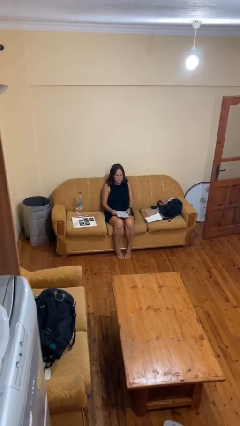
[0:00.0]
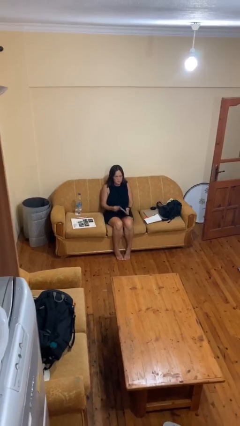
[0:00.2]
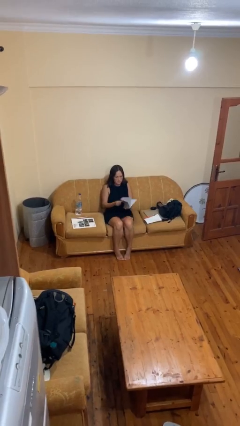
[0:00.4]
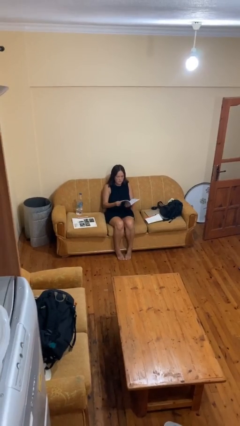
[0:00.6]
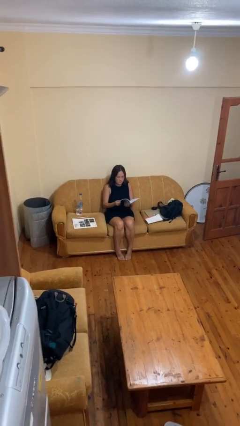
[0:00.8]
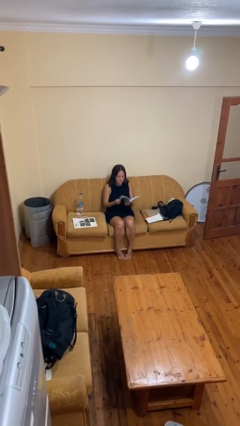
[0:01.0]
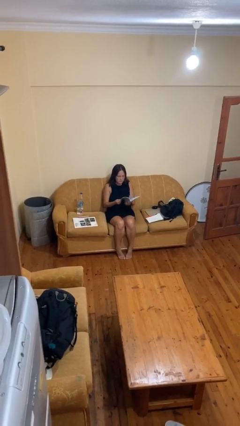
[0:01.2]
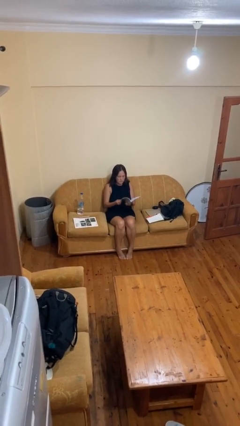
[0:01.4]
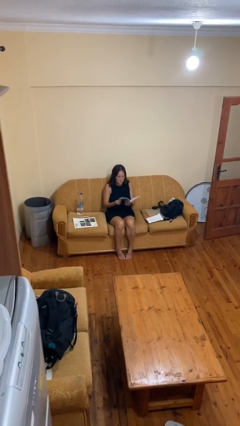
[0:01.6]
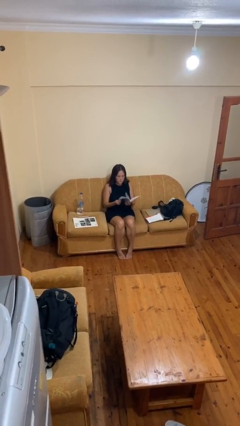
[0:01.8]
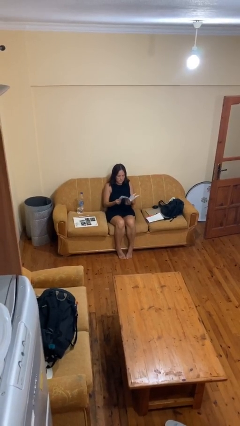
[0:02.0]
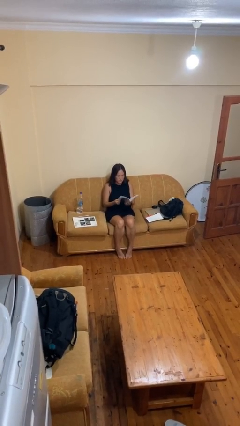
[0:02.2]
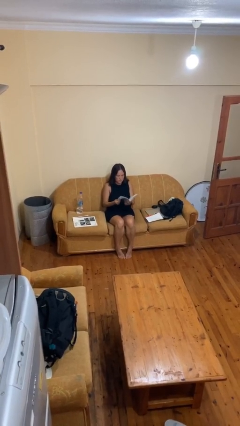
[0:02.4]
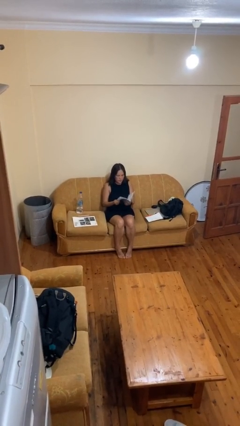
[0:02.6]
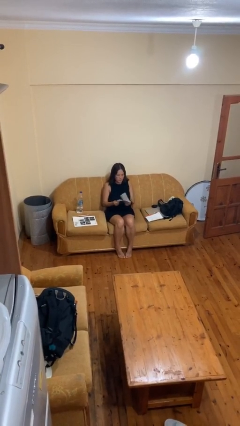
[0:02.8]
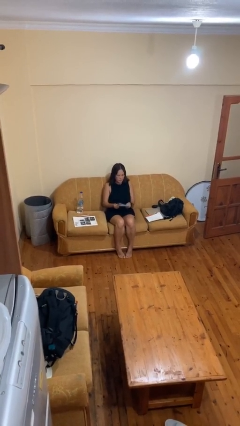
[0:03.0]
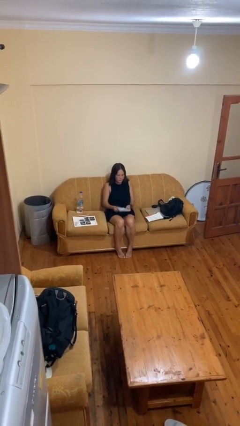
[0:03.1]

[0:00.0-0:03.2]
person reads book

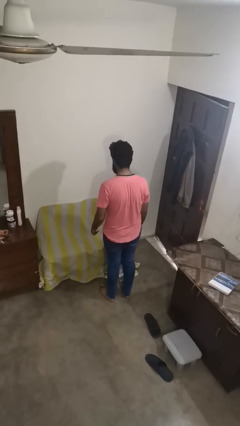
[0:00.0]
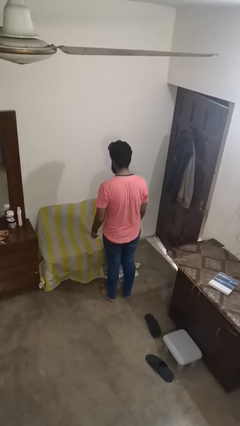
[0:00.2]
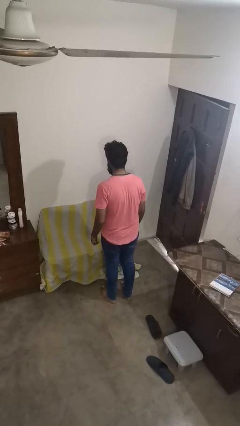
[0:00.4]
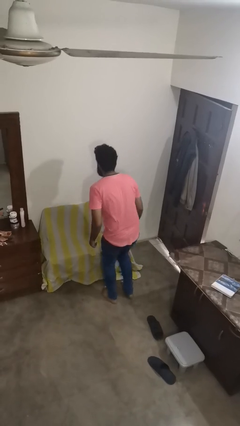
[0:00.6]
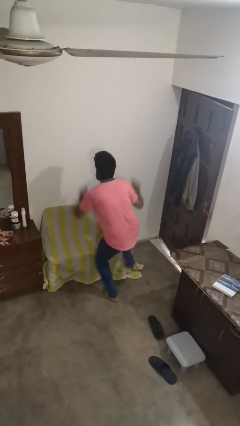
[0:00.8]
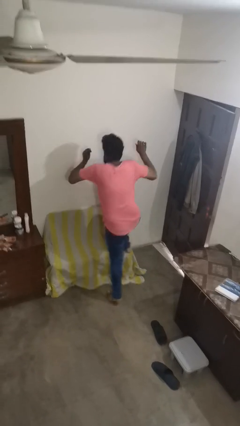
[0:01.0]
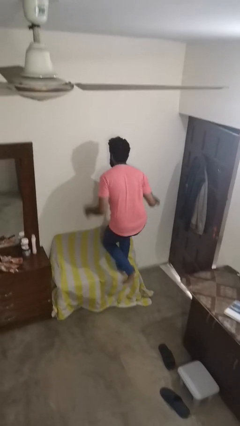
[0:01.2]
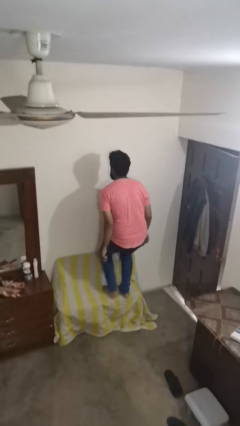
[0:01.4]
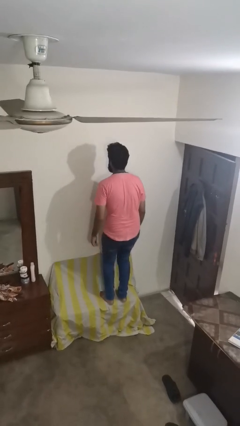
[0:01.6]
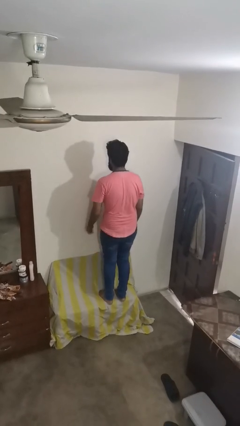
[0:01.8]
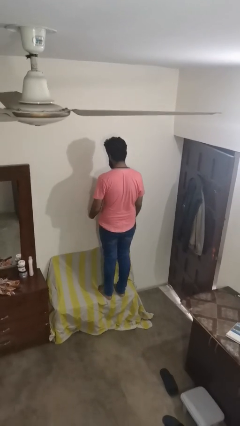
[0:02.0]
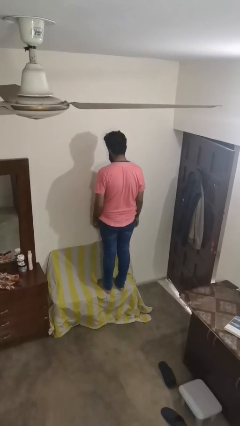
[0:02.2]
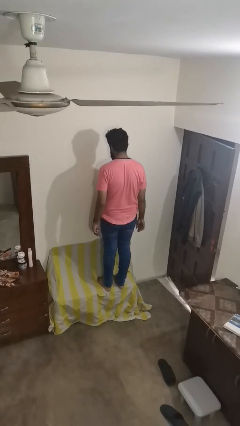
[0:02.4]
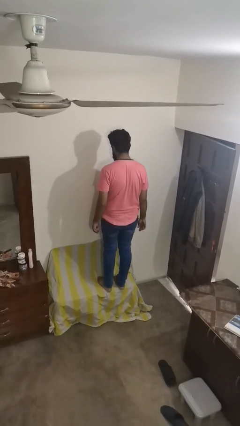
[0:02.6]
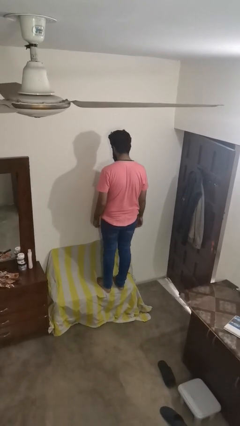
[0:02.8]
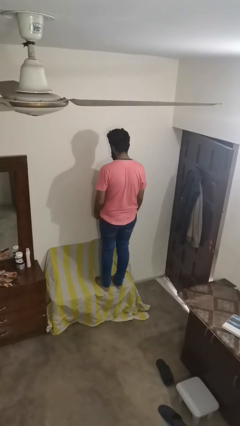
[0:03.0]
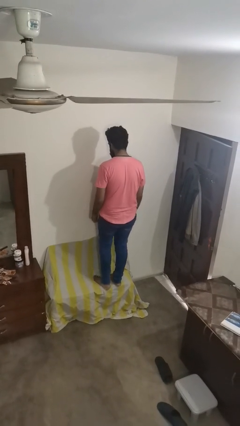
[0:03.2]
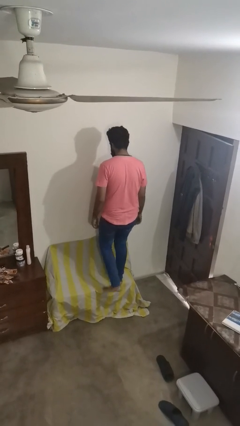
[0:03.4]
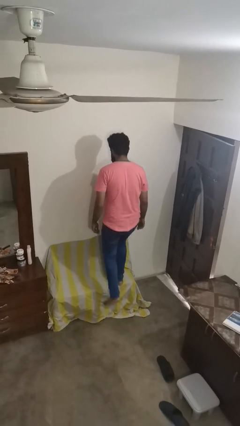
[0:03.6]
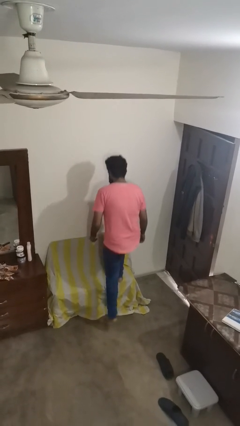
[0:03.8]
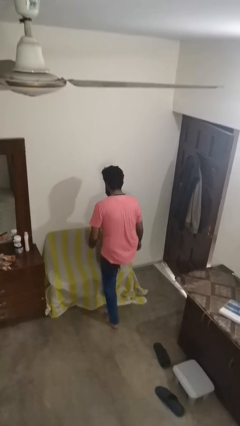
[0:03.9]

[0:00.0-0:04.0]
person jumps on couch

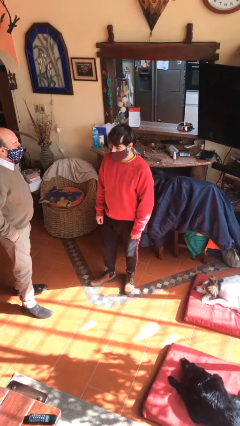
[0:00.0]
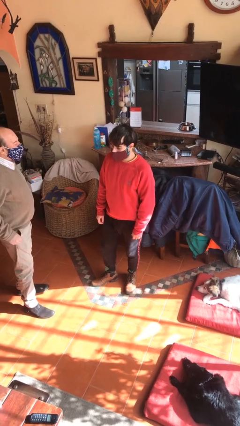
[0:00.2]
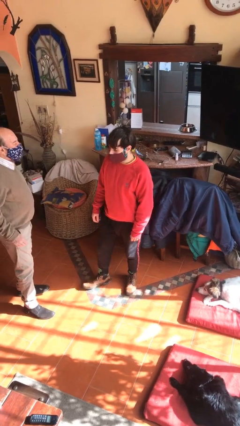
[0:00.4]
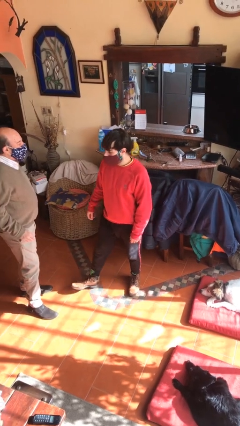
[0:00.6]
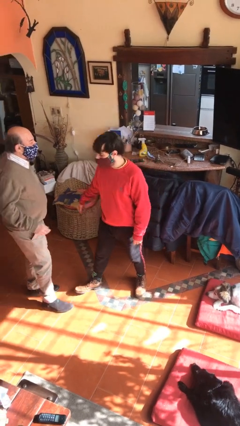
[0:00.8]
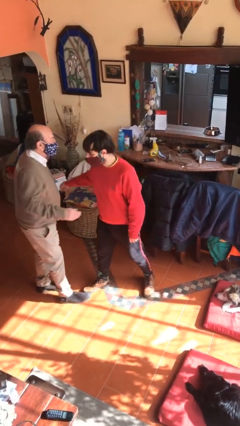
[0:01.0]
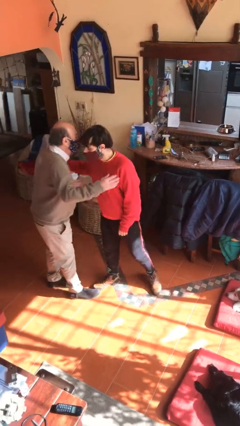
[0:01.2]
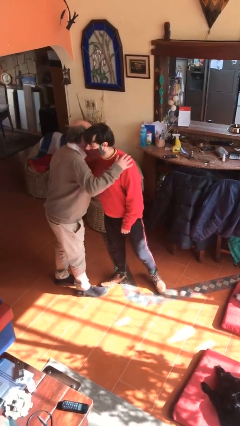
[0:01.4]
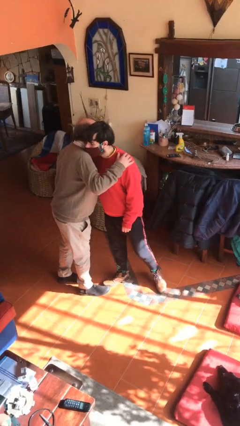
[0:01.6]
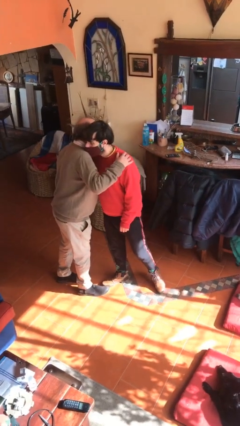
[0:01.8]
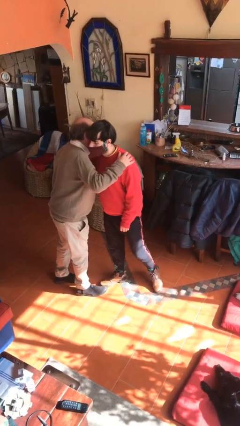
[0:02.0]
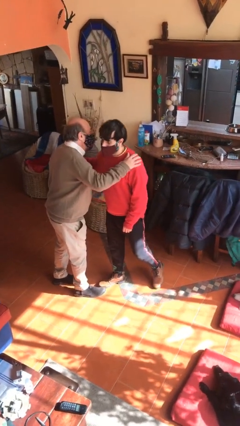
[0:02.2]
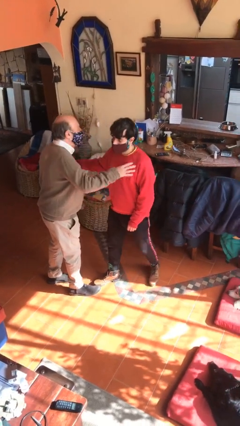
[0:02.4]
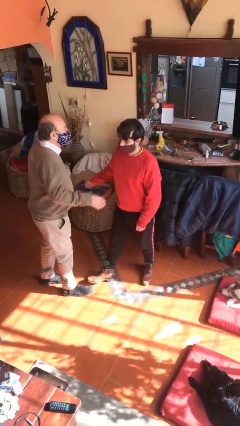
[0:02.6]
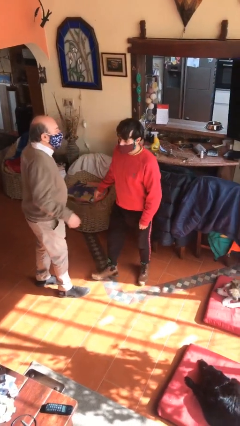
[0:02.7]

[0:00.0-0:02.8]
person kisses cheek of person

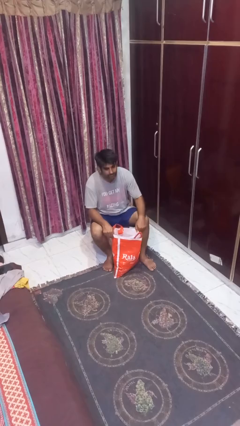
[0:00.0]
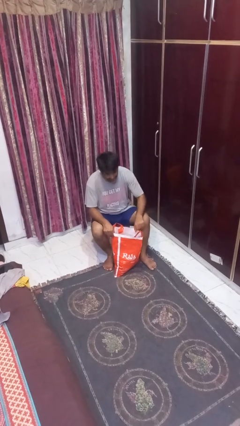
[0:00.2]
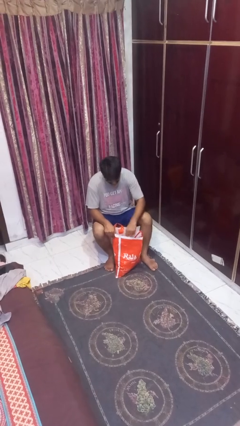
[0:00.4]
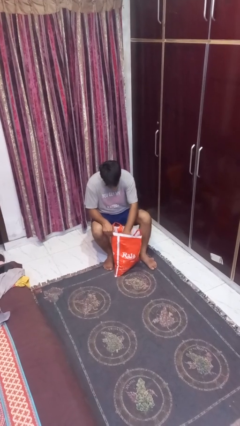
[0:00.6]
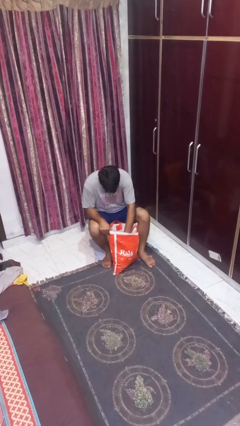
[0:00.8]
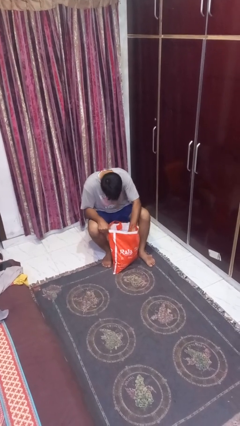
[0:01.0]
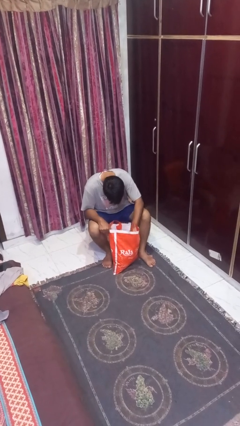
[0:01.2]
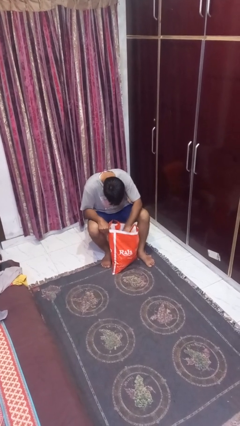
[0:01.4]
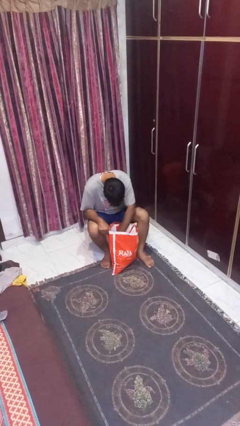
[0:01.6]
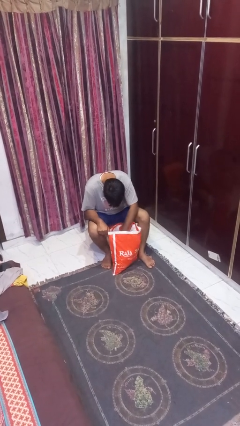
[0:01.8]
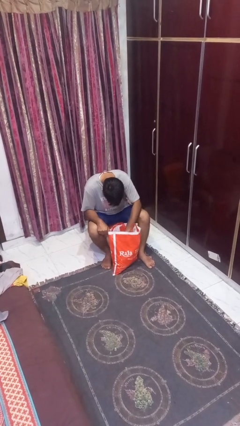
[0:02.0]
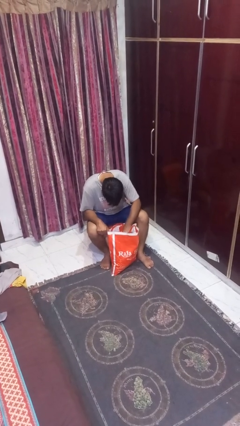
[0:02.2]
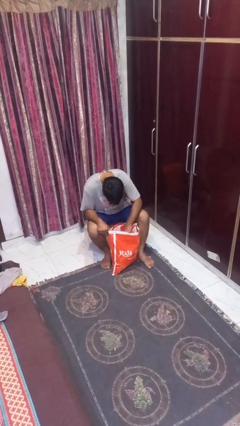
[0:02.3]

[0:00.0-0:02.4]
person searches in bag

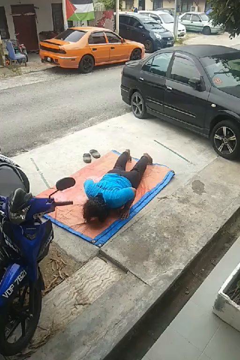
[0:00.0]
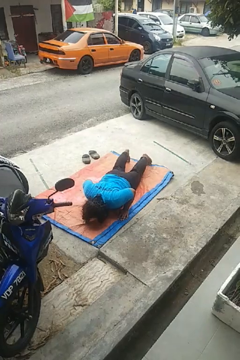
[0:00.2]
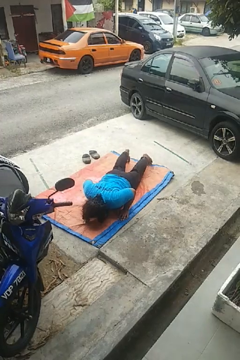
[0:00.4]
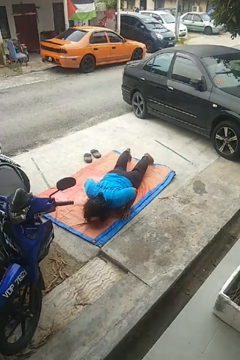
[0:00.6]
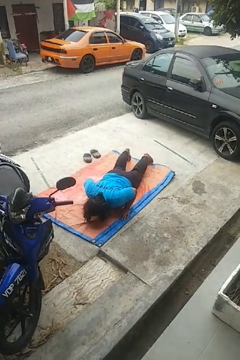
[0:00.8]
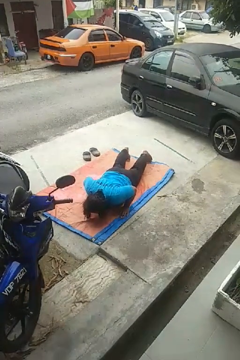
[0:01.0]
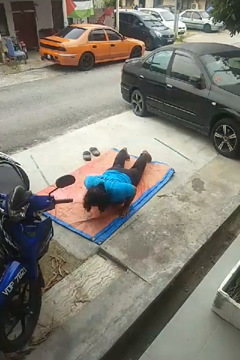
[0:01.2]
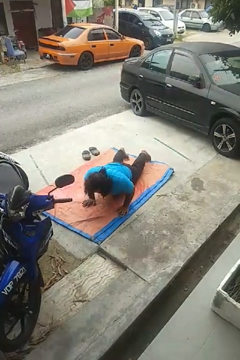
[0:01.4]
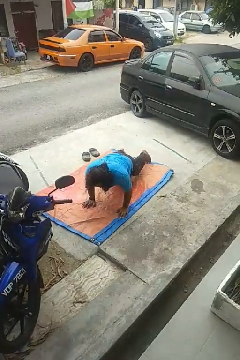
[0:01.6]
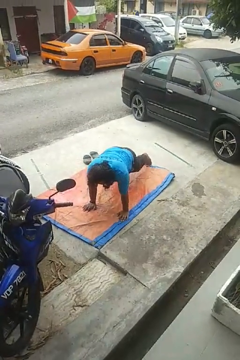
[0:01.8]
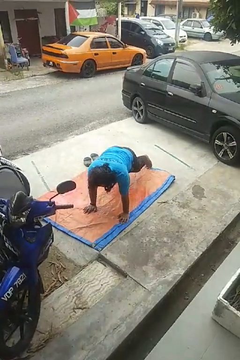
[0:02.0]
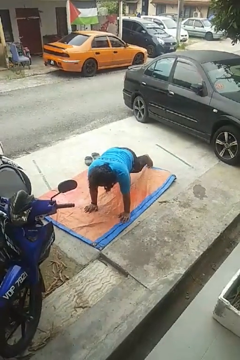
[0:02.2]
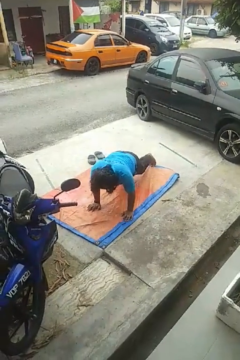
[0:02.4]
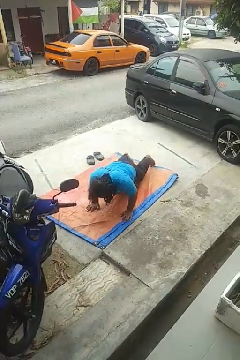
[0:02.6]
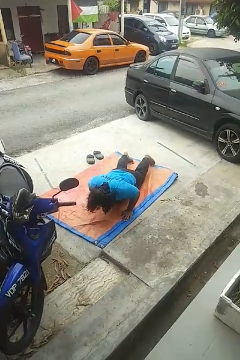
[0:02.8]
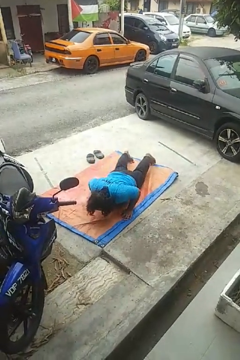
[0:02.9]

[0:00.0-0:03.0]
person exercises with pushup

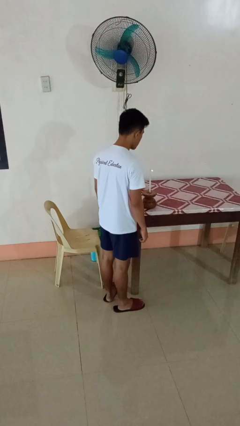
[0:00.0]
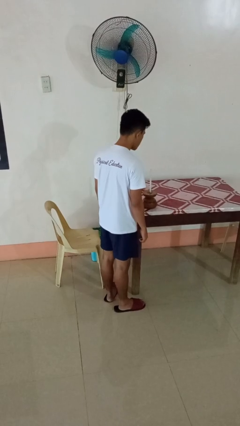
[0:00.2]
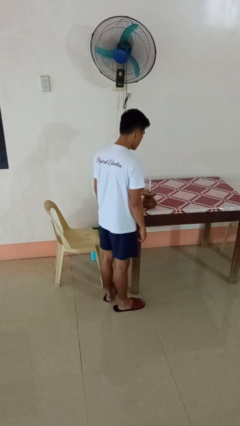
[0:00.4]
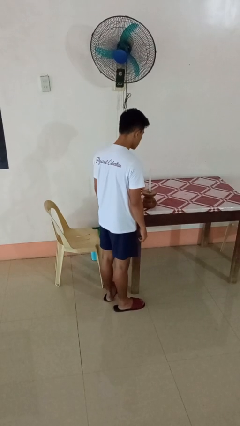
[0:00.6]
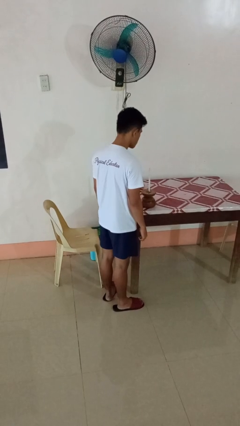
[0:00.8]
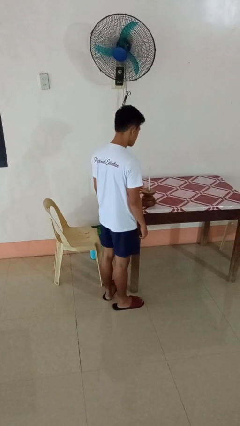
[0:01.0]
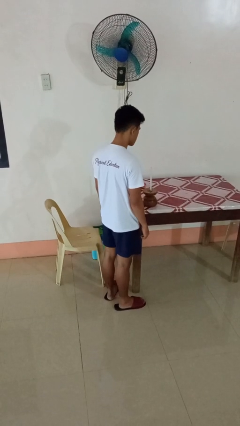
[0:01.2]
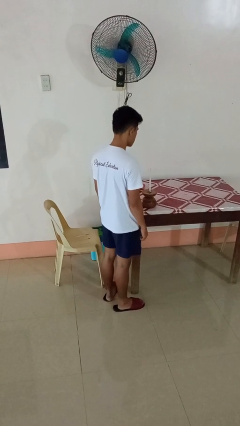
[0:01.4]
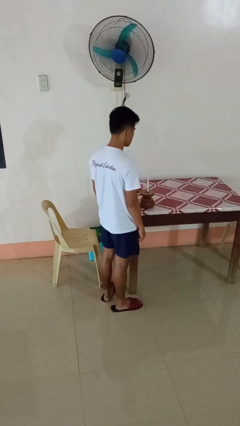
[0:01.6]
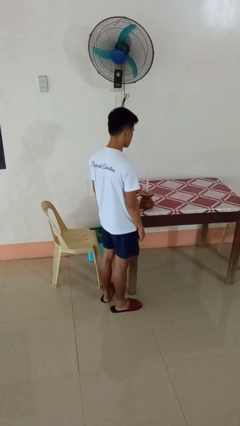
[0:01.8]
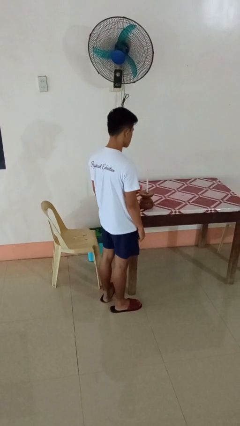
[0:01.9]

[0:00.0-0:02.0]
person extinguishes candle

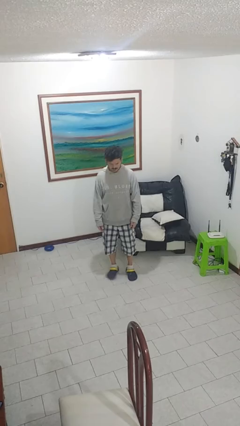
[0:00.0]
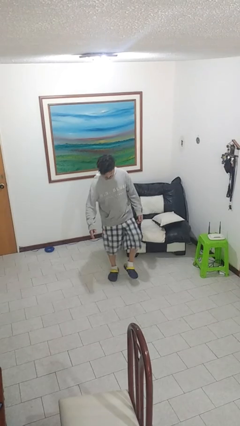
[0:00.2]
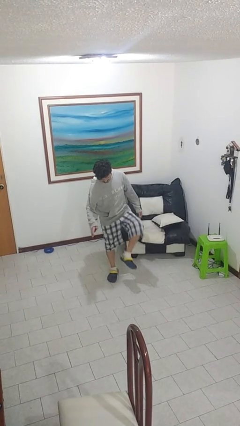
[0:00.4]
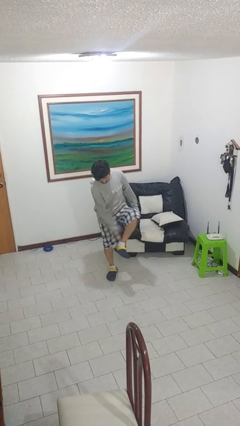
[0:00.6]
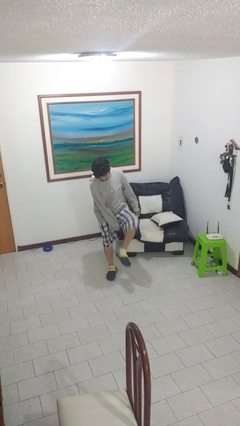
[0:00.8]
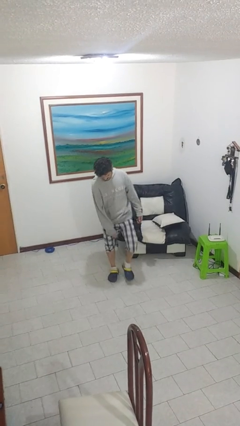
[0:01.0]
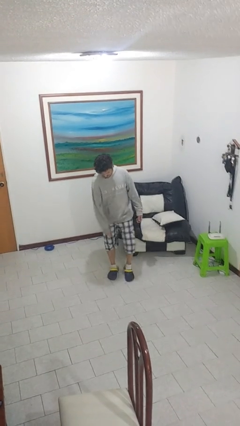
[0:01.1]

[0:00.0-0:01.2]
person swats bug
